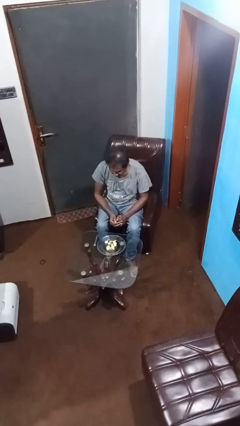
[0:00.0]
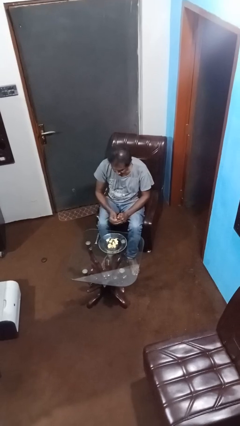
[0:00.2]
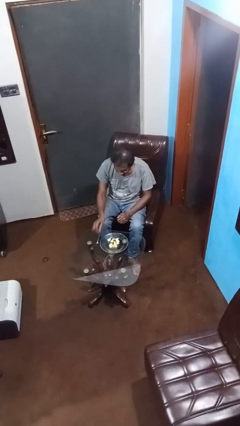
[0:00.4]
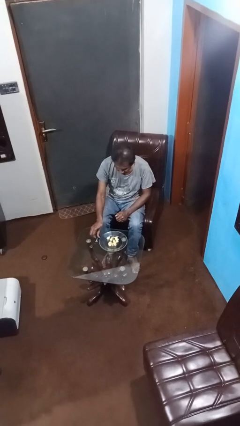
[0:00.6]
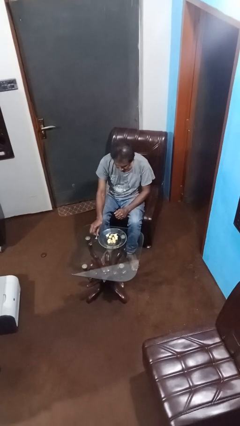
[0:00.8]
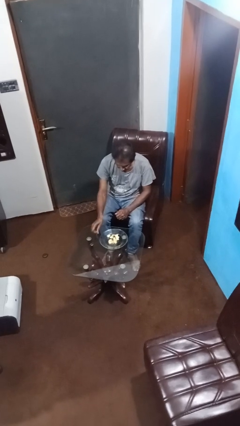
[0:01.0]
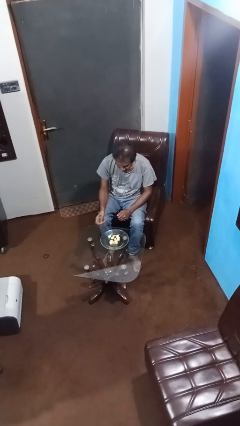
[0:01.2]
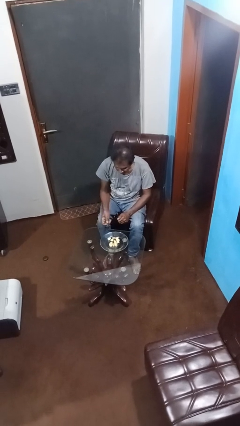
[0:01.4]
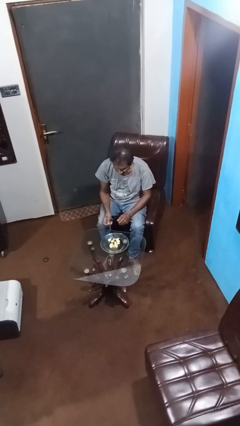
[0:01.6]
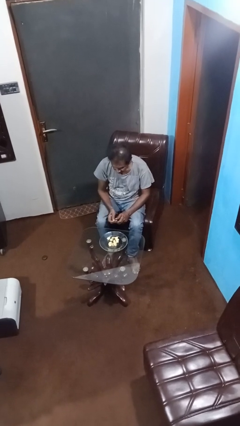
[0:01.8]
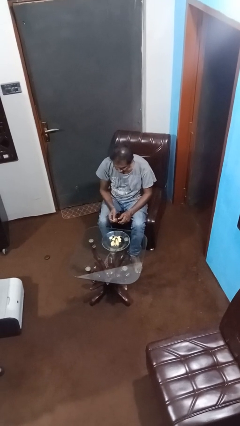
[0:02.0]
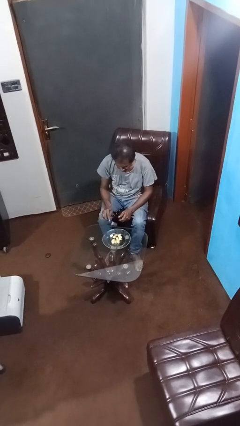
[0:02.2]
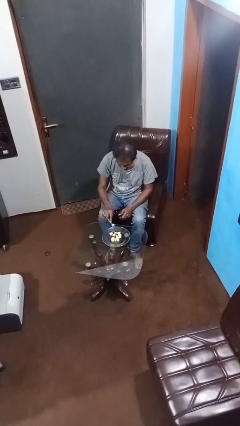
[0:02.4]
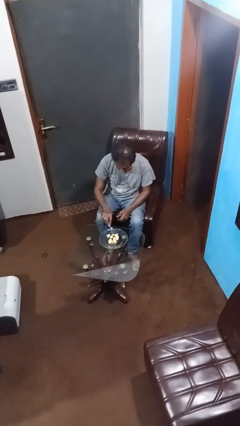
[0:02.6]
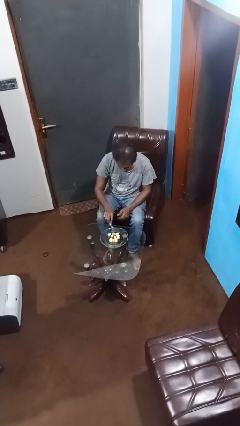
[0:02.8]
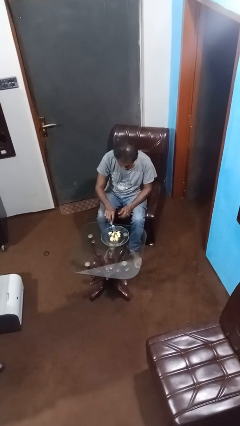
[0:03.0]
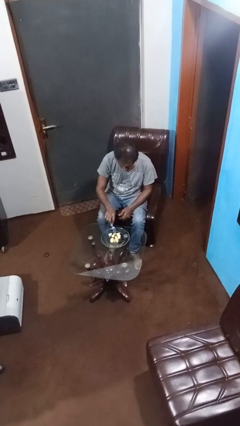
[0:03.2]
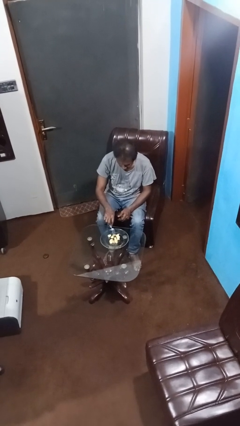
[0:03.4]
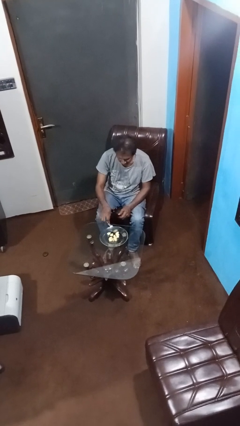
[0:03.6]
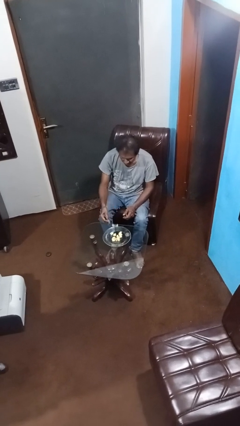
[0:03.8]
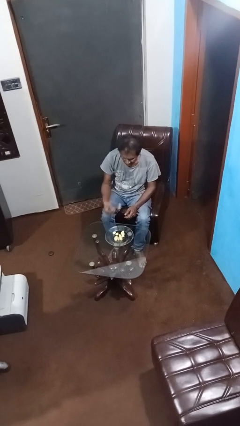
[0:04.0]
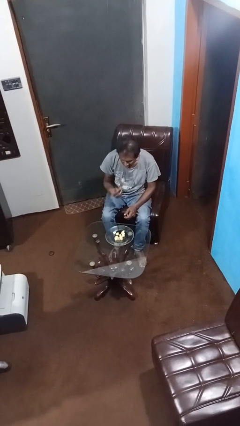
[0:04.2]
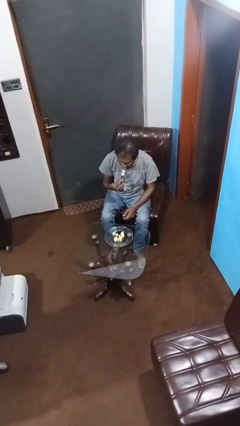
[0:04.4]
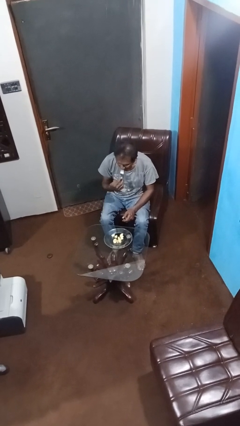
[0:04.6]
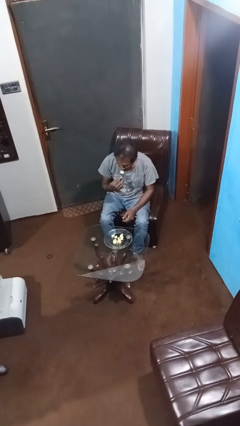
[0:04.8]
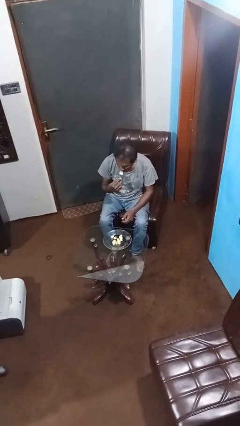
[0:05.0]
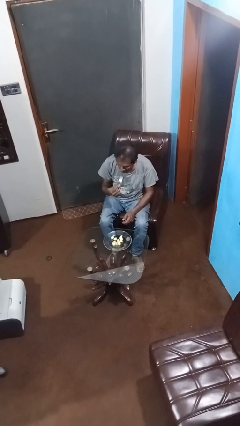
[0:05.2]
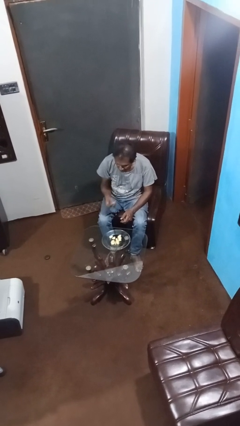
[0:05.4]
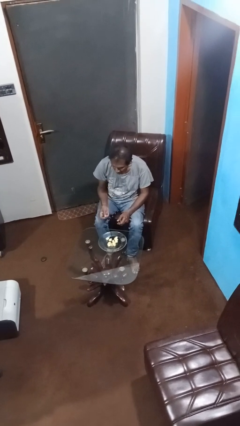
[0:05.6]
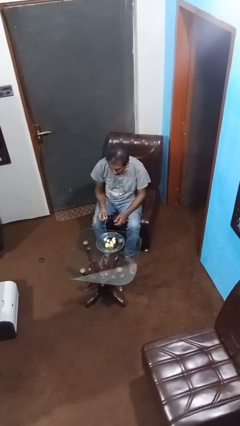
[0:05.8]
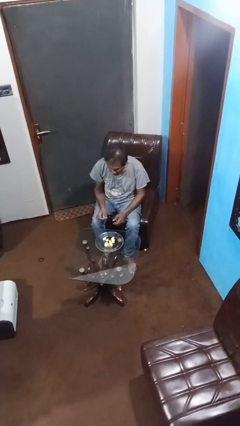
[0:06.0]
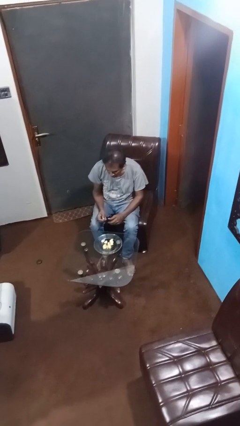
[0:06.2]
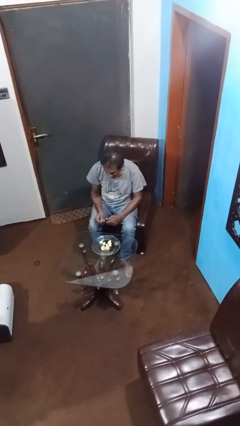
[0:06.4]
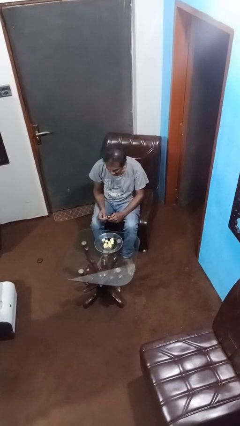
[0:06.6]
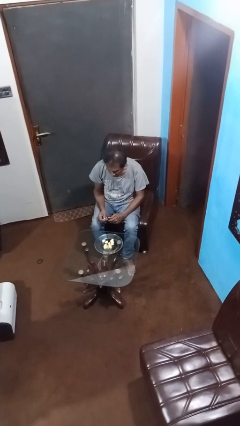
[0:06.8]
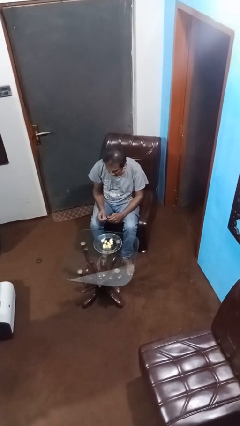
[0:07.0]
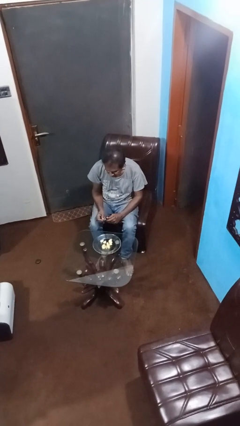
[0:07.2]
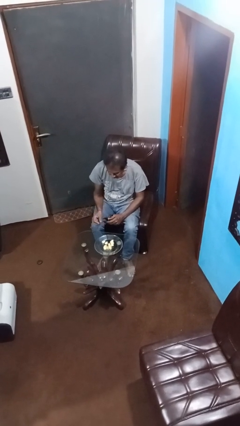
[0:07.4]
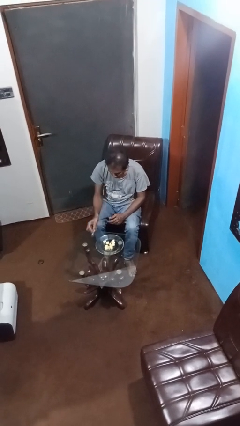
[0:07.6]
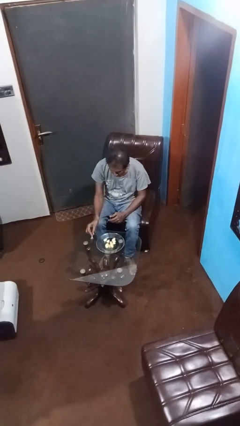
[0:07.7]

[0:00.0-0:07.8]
person eats with utensil

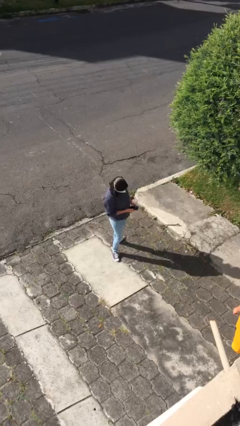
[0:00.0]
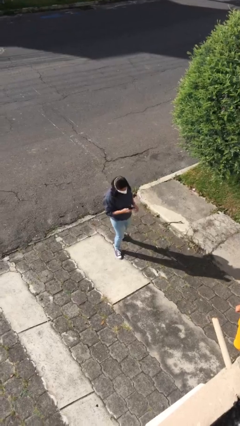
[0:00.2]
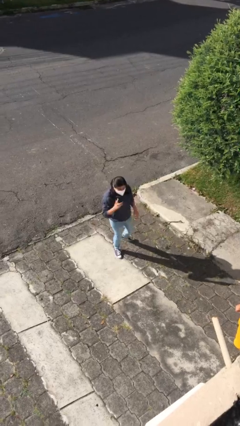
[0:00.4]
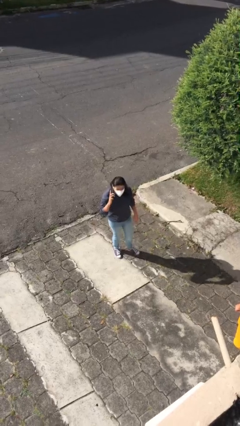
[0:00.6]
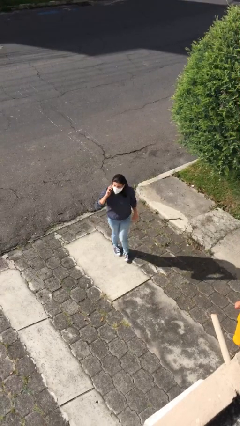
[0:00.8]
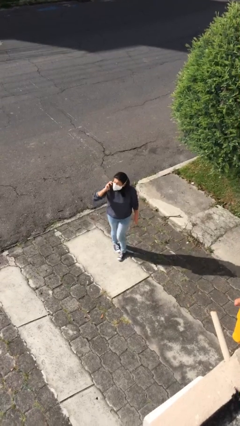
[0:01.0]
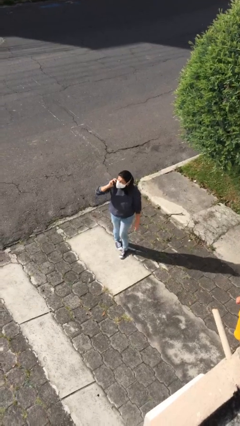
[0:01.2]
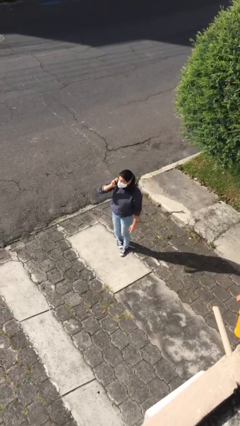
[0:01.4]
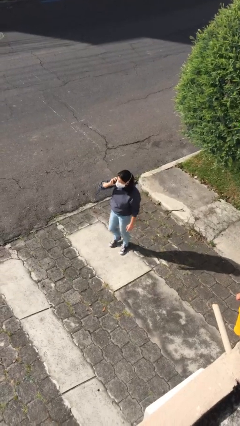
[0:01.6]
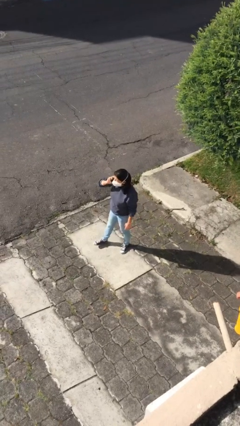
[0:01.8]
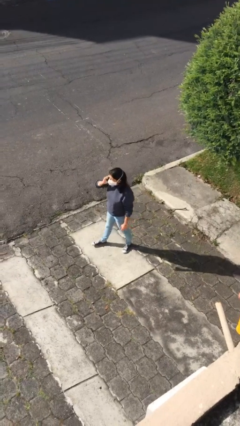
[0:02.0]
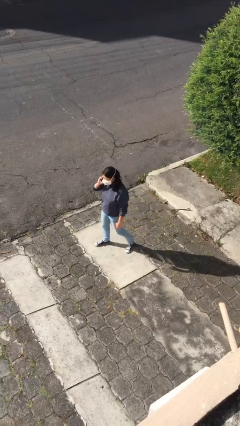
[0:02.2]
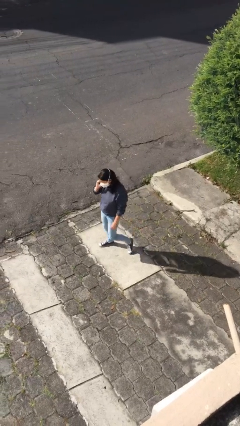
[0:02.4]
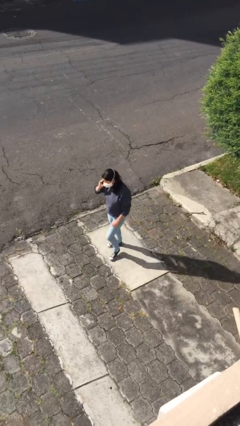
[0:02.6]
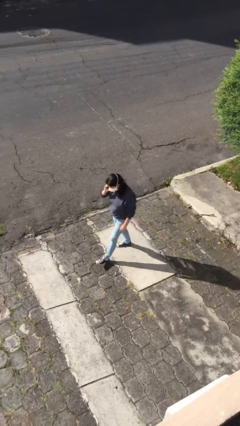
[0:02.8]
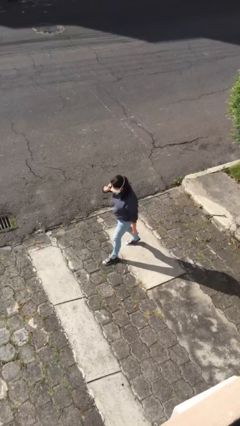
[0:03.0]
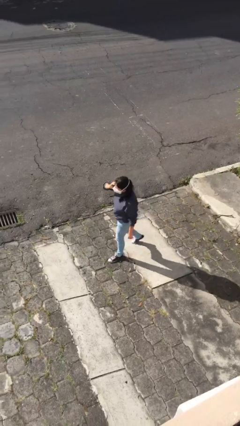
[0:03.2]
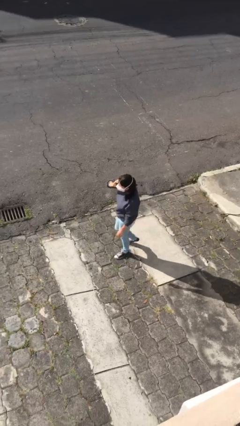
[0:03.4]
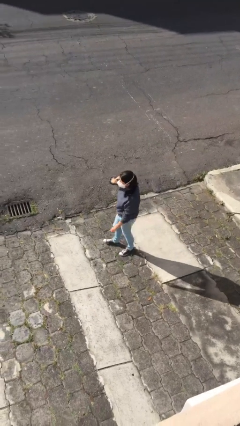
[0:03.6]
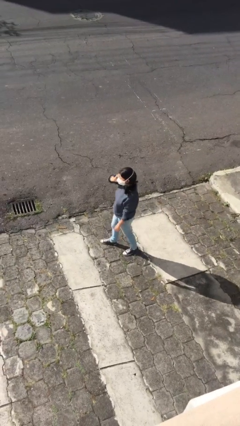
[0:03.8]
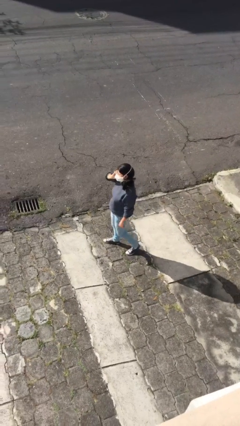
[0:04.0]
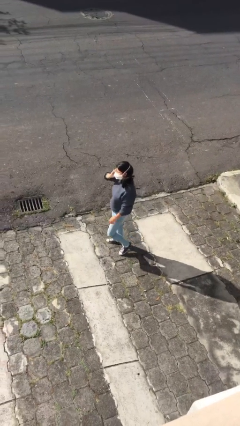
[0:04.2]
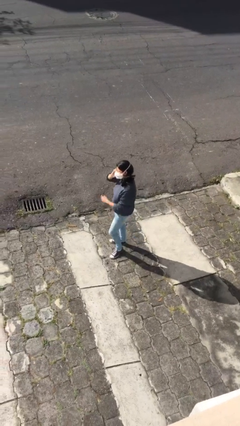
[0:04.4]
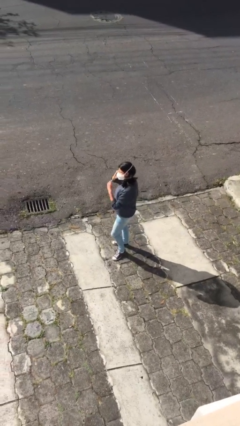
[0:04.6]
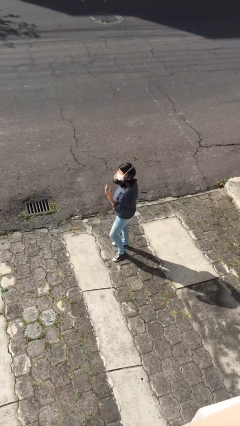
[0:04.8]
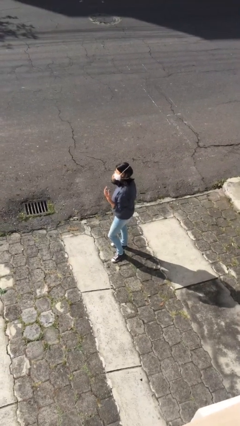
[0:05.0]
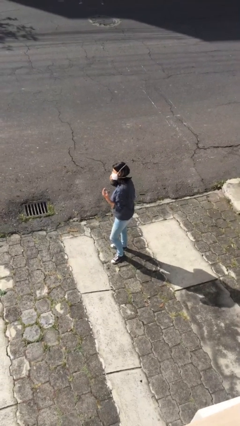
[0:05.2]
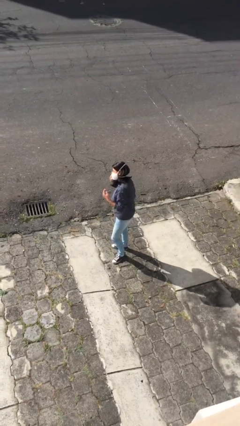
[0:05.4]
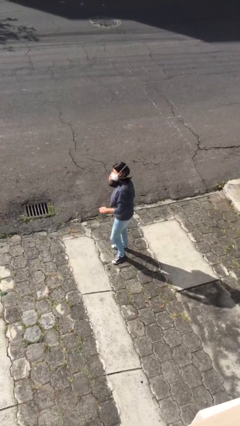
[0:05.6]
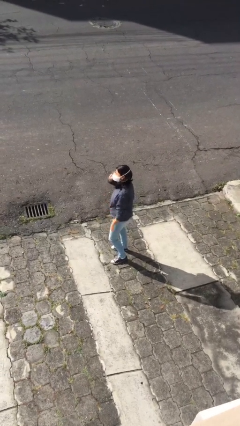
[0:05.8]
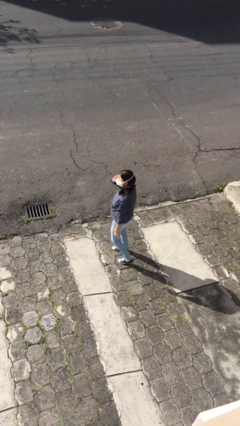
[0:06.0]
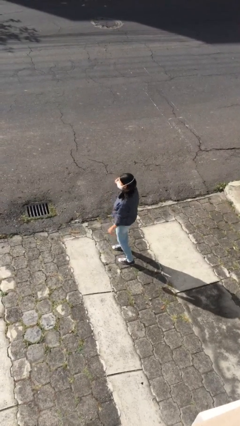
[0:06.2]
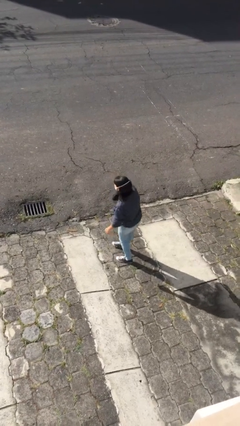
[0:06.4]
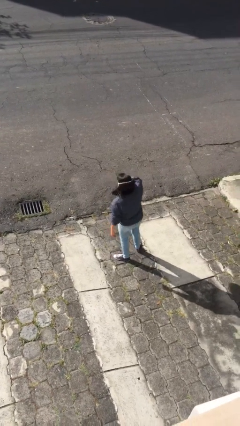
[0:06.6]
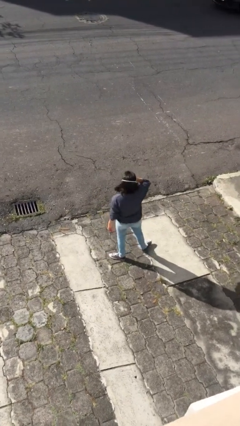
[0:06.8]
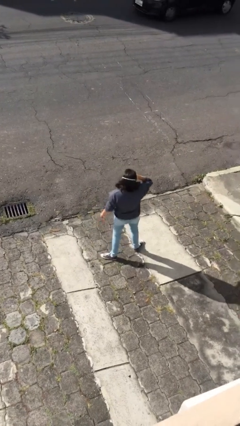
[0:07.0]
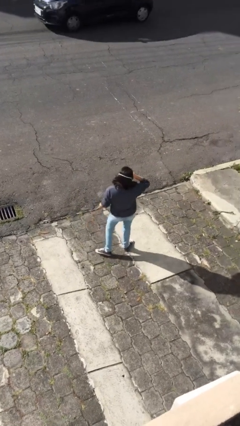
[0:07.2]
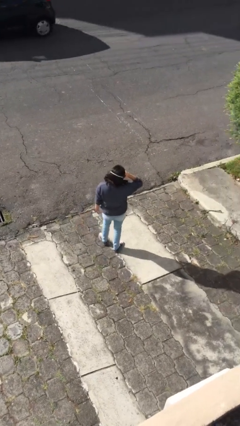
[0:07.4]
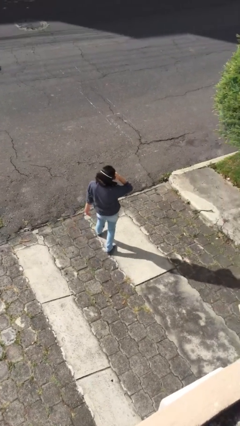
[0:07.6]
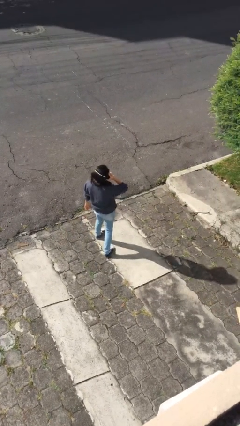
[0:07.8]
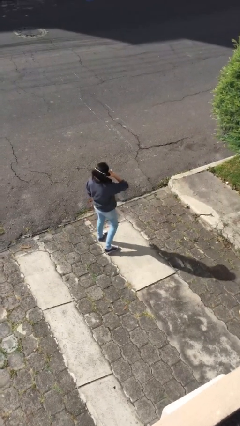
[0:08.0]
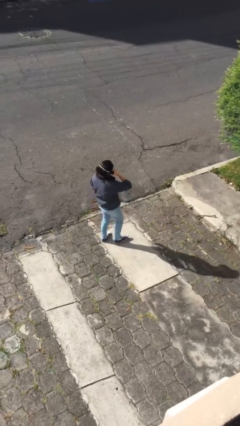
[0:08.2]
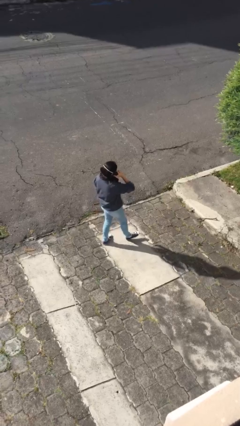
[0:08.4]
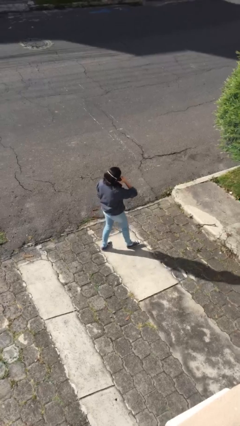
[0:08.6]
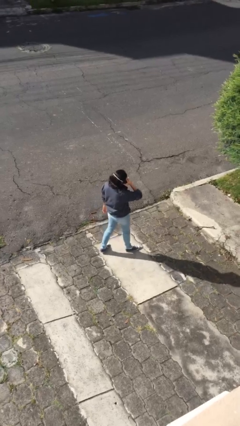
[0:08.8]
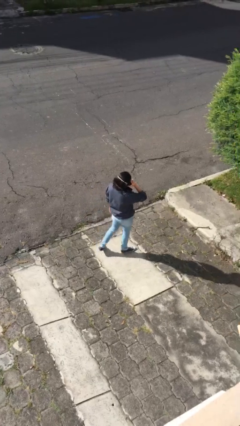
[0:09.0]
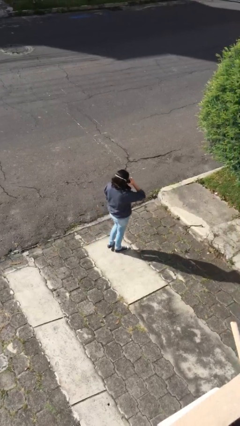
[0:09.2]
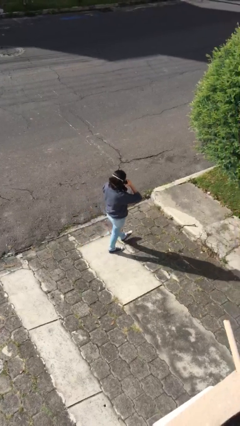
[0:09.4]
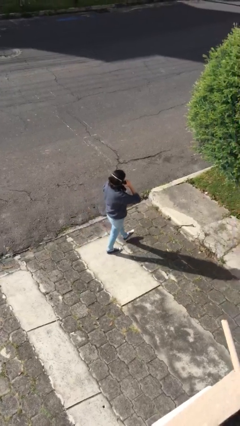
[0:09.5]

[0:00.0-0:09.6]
person talks on phone

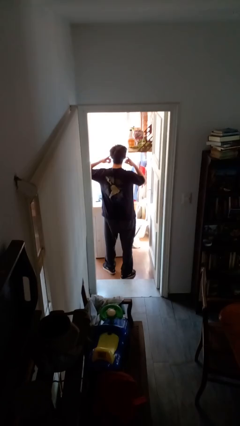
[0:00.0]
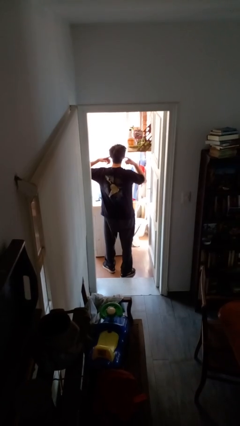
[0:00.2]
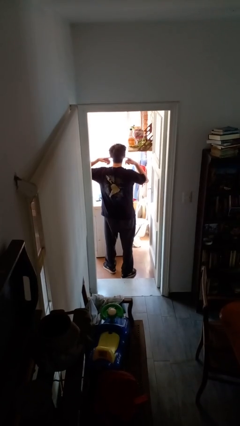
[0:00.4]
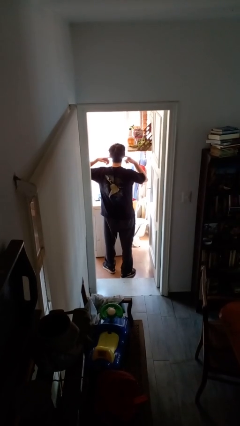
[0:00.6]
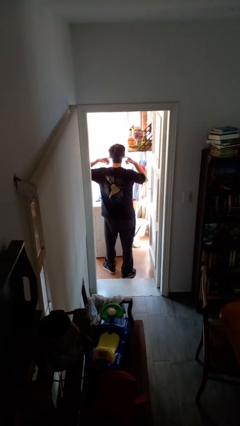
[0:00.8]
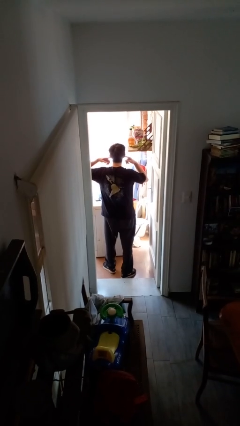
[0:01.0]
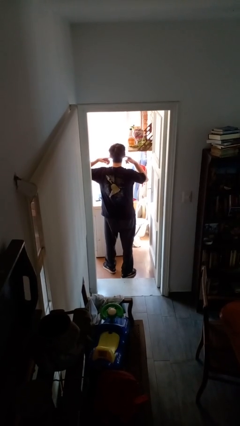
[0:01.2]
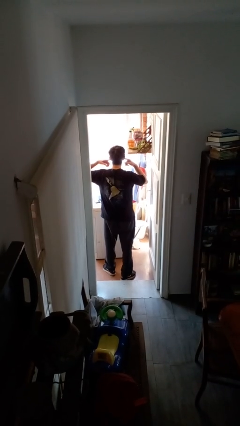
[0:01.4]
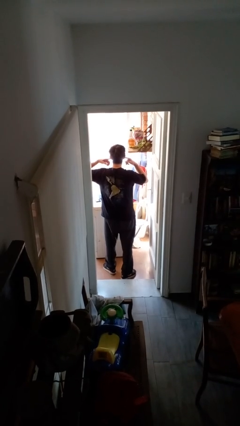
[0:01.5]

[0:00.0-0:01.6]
person puts fingers in ear
